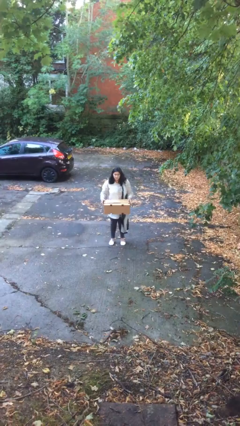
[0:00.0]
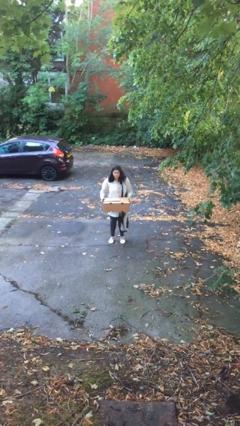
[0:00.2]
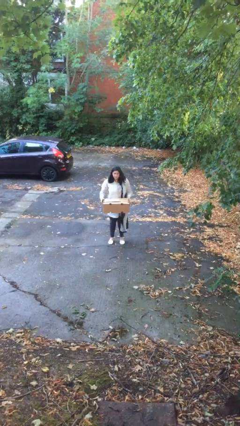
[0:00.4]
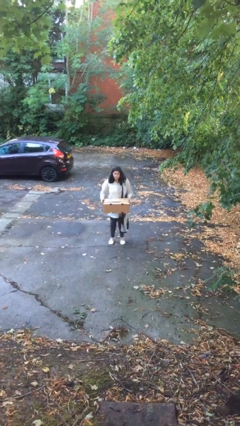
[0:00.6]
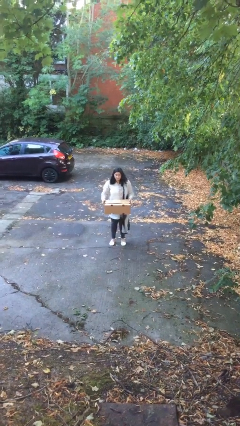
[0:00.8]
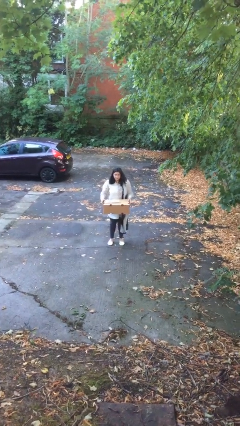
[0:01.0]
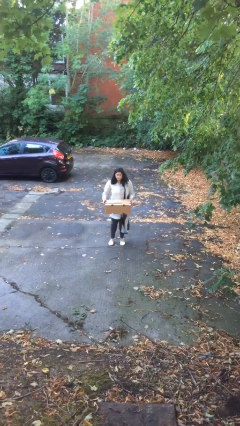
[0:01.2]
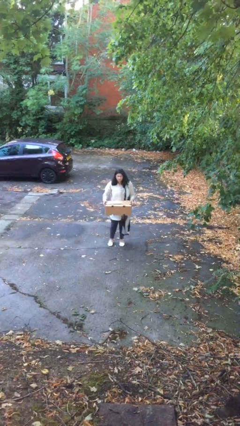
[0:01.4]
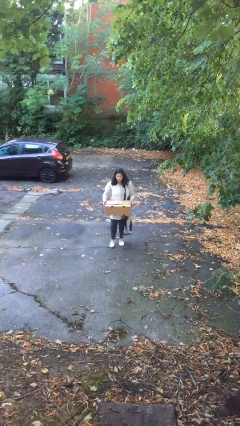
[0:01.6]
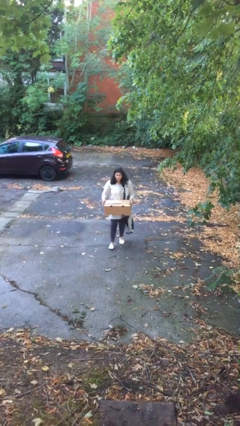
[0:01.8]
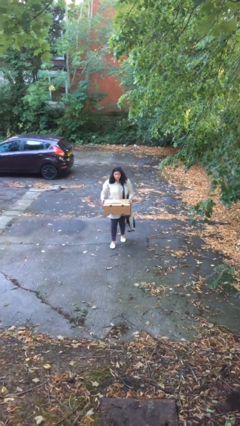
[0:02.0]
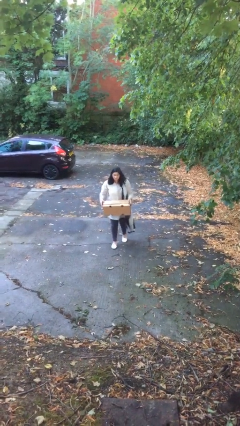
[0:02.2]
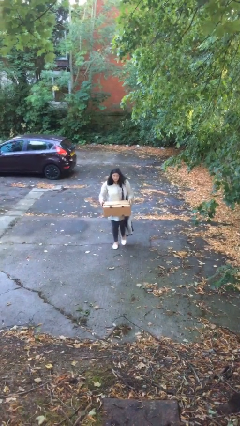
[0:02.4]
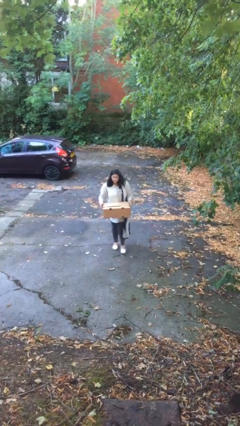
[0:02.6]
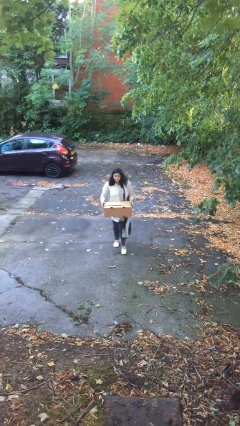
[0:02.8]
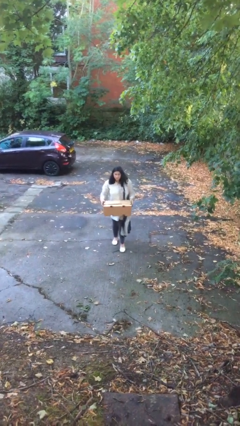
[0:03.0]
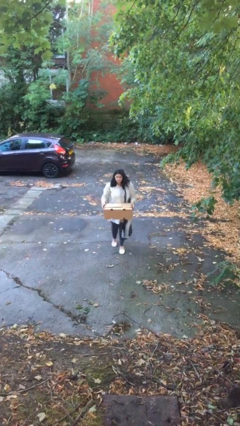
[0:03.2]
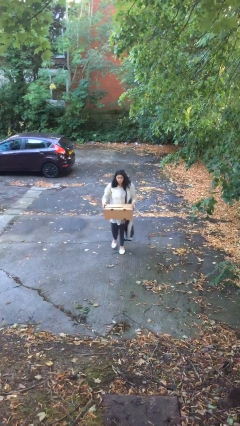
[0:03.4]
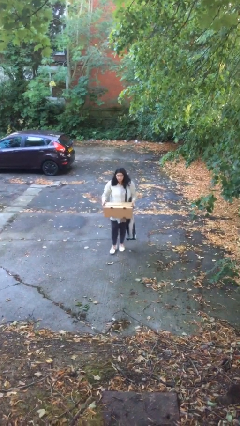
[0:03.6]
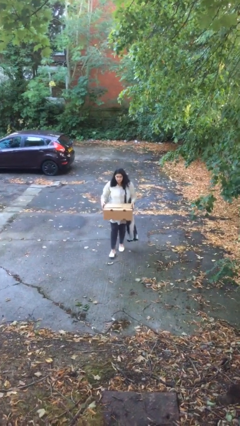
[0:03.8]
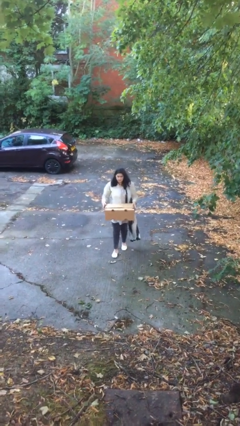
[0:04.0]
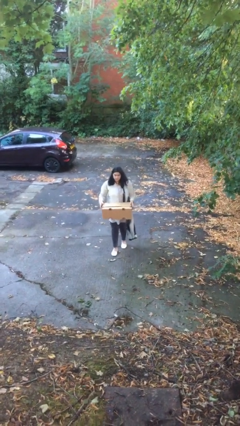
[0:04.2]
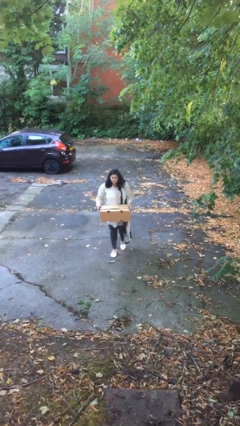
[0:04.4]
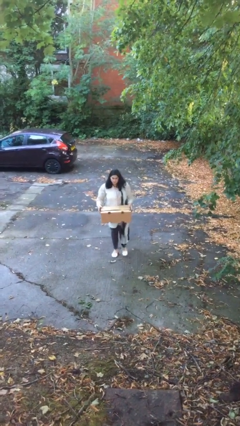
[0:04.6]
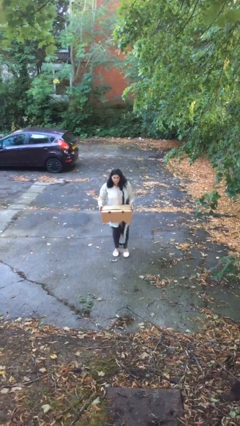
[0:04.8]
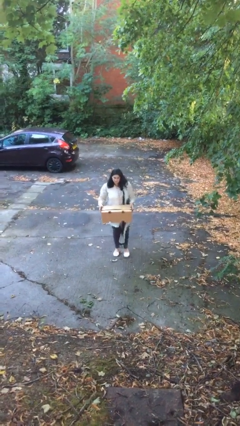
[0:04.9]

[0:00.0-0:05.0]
person carries heavy object

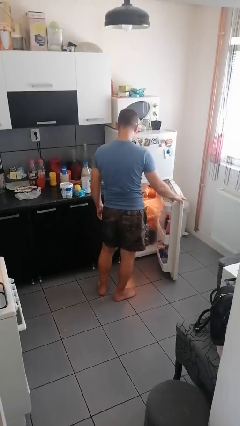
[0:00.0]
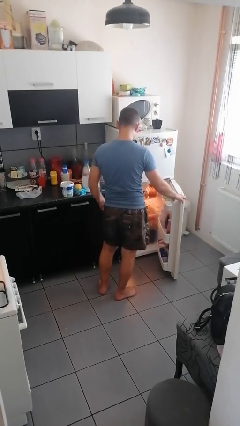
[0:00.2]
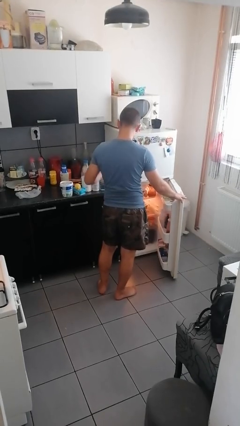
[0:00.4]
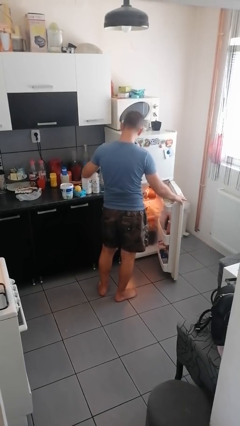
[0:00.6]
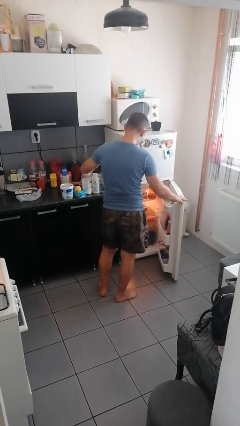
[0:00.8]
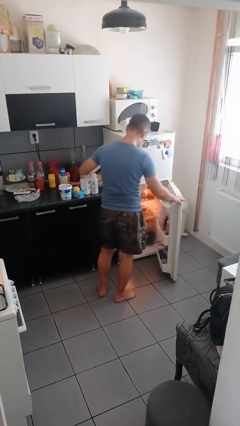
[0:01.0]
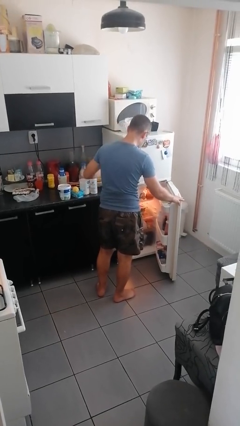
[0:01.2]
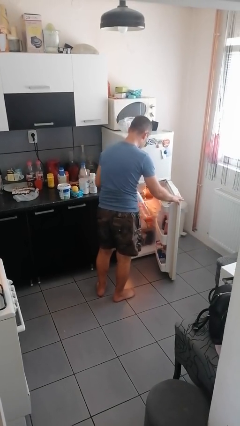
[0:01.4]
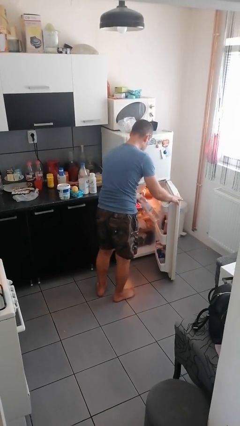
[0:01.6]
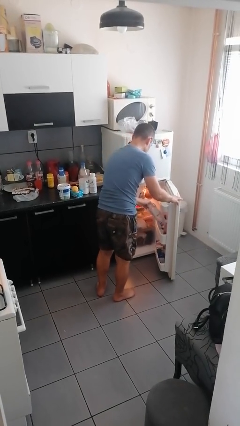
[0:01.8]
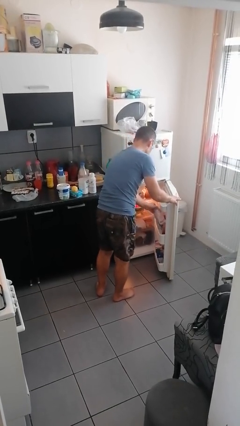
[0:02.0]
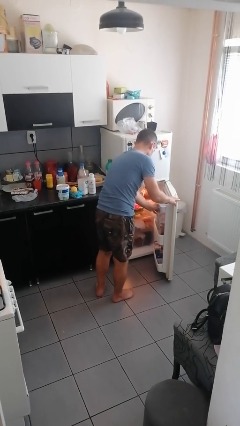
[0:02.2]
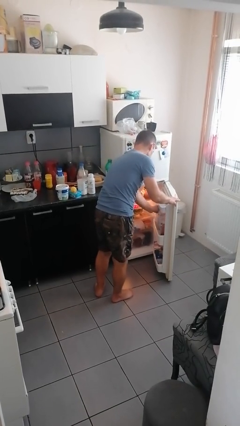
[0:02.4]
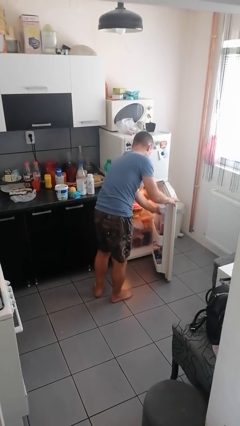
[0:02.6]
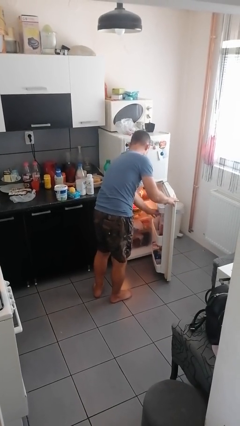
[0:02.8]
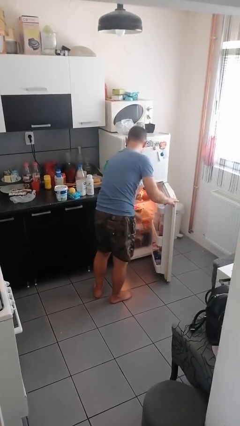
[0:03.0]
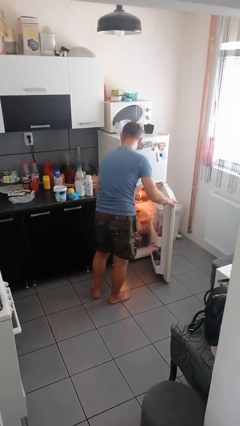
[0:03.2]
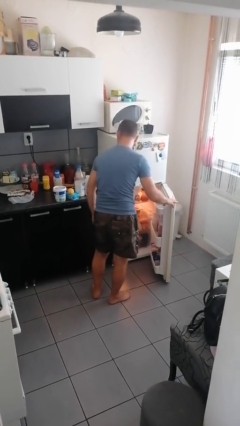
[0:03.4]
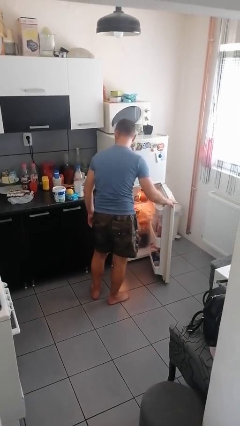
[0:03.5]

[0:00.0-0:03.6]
person loads groceries into refrigerator

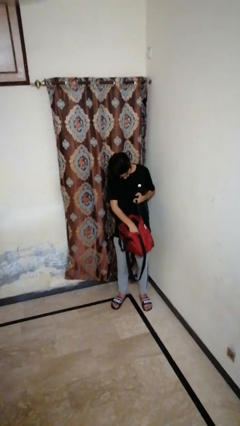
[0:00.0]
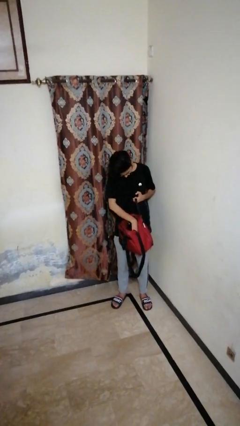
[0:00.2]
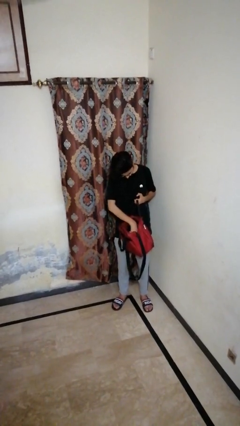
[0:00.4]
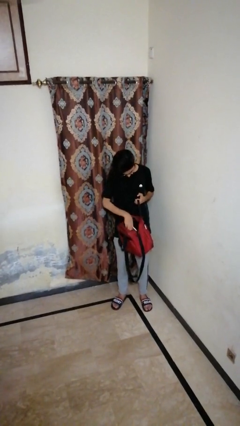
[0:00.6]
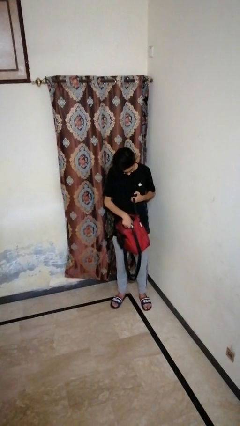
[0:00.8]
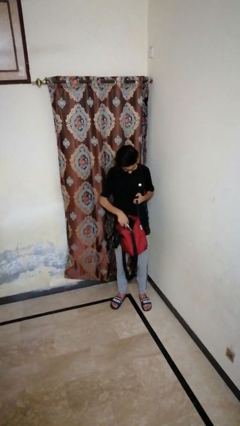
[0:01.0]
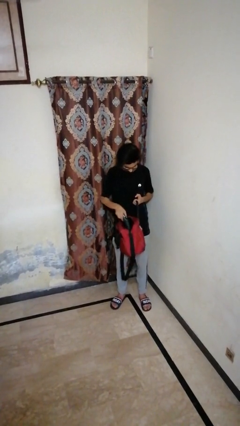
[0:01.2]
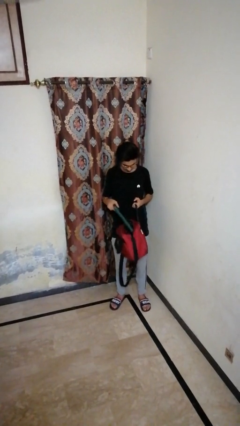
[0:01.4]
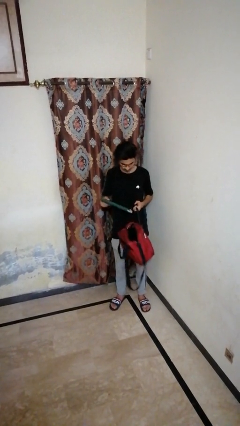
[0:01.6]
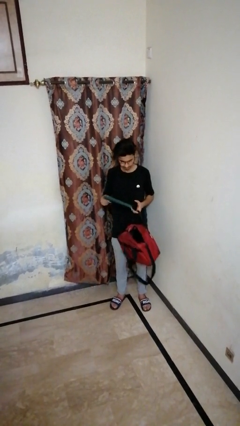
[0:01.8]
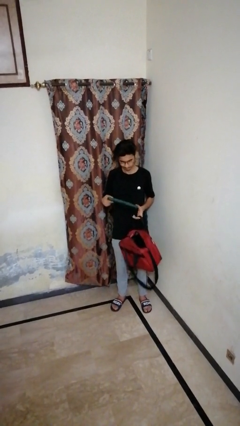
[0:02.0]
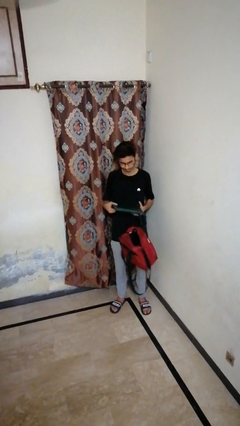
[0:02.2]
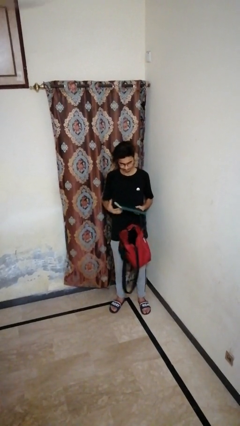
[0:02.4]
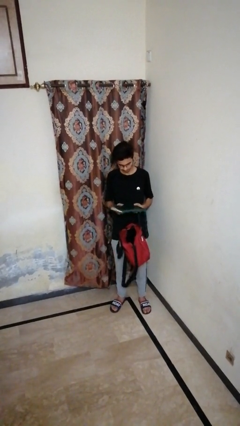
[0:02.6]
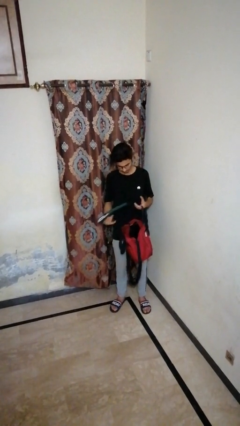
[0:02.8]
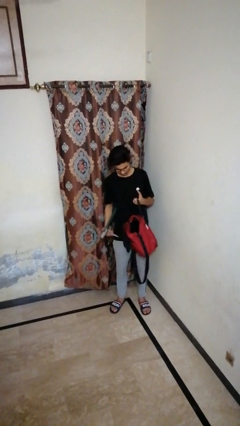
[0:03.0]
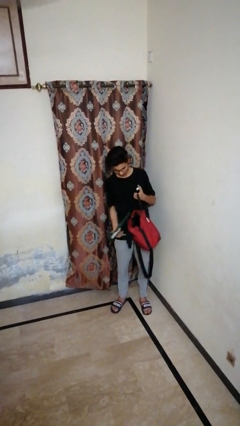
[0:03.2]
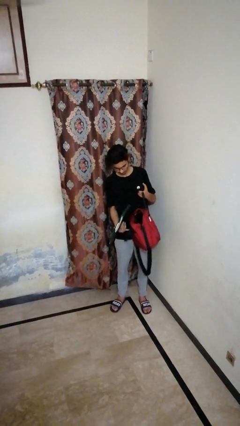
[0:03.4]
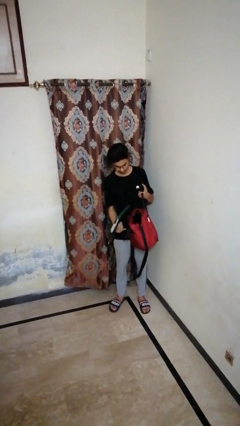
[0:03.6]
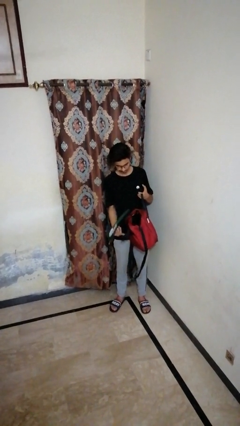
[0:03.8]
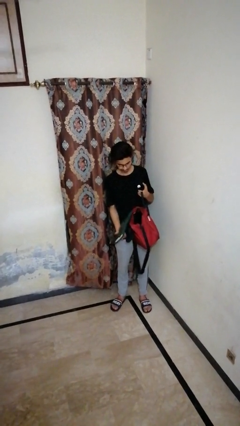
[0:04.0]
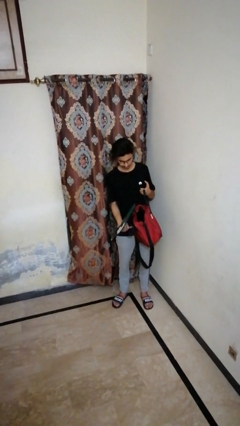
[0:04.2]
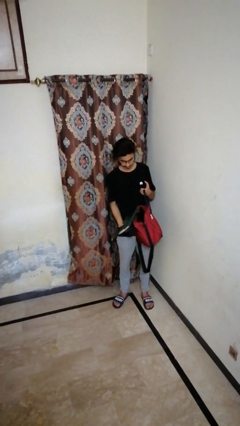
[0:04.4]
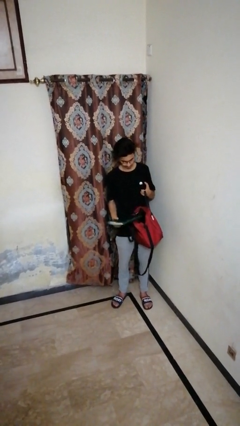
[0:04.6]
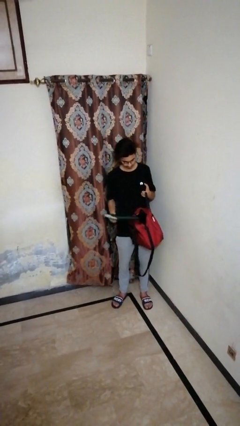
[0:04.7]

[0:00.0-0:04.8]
person takes object from backpack

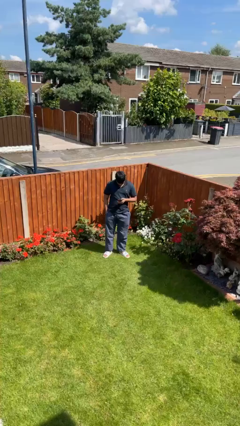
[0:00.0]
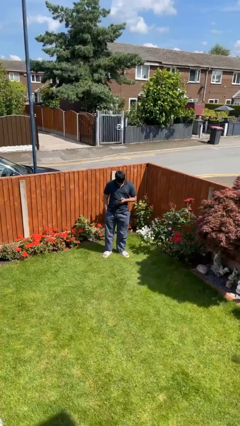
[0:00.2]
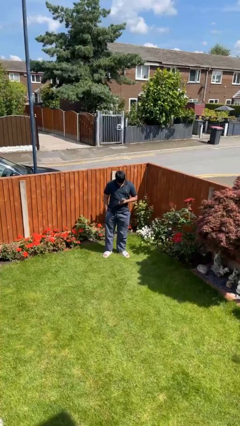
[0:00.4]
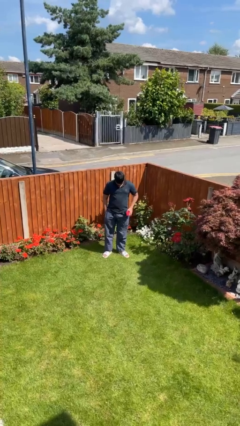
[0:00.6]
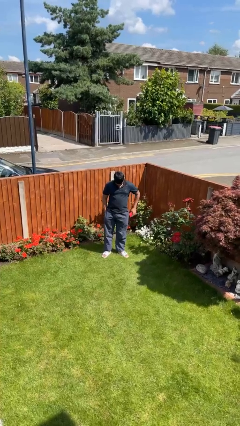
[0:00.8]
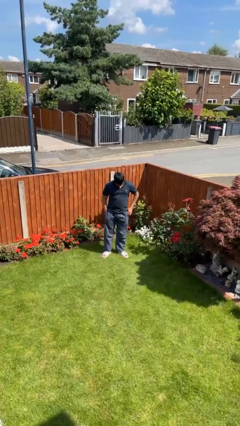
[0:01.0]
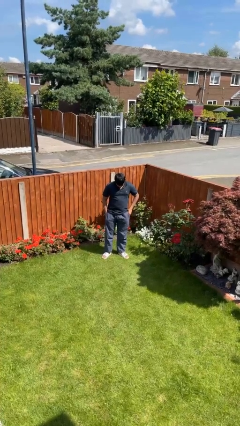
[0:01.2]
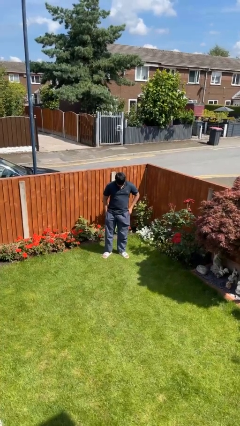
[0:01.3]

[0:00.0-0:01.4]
person puts phone into pocket

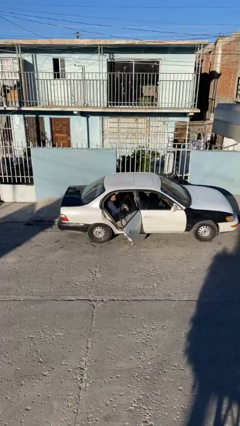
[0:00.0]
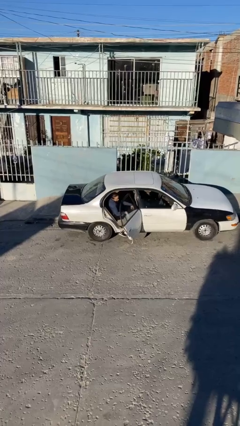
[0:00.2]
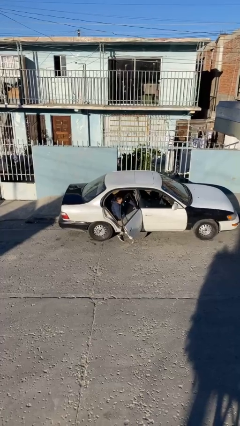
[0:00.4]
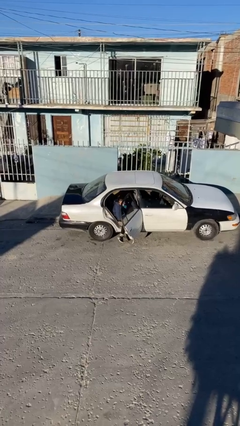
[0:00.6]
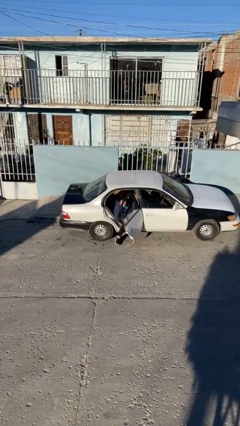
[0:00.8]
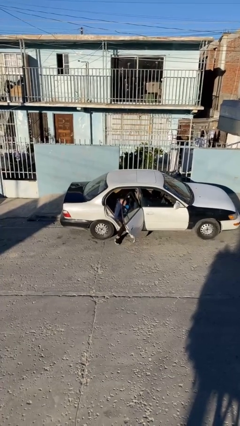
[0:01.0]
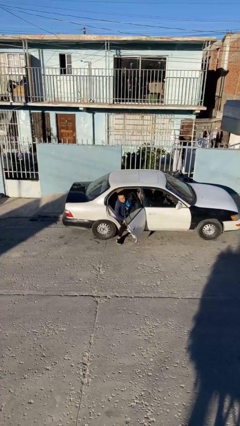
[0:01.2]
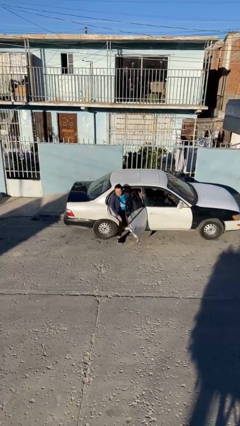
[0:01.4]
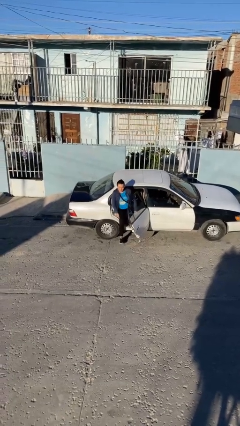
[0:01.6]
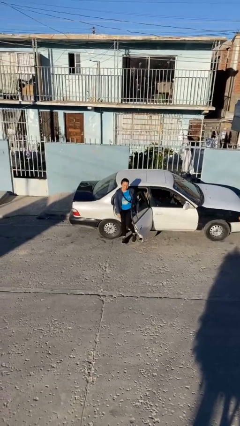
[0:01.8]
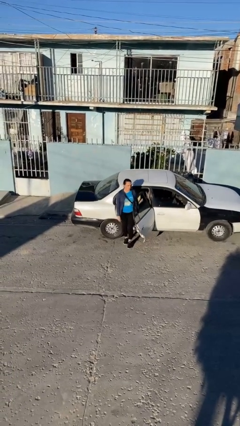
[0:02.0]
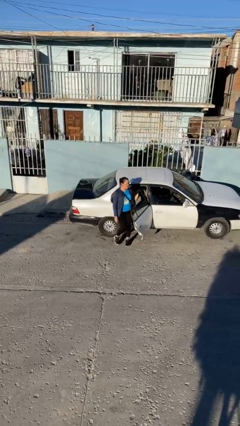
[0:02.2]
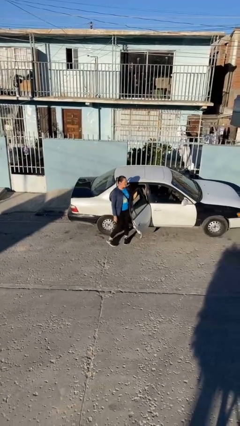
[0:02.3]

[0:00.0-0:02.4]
person exits car

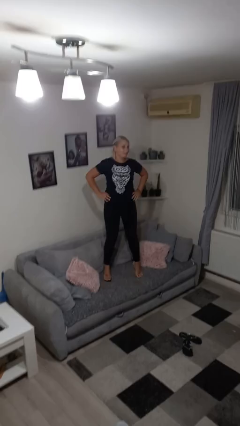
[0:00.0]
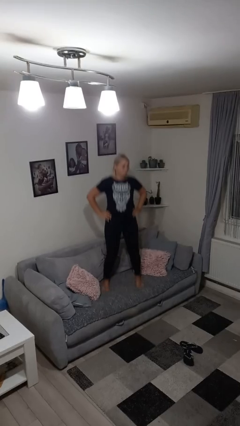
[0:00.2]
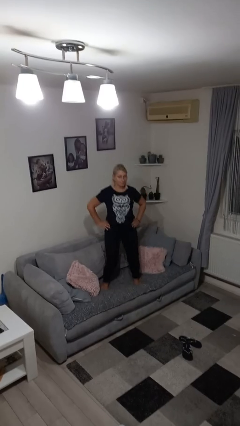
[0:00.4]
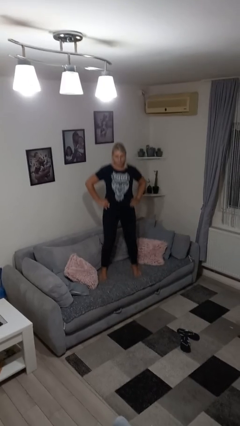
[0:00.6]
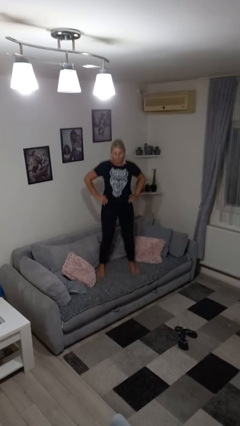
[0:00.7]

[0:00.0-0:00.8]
person jumps on couch
